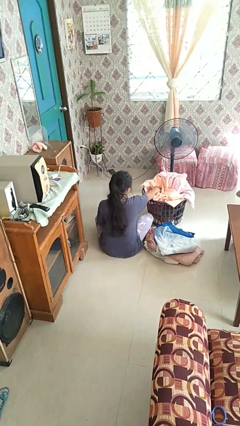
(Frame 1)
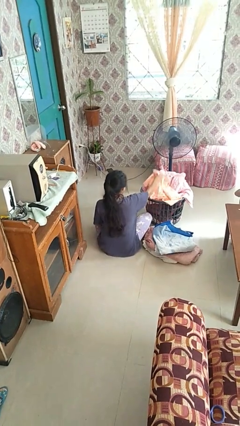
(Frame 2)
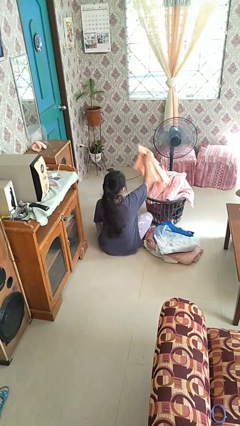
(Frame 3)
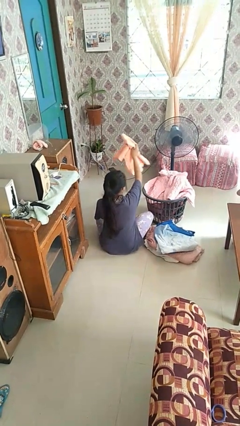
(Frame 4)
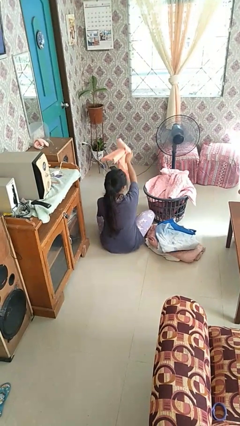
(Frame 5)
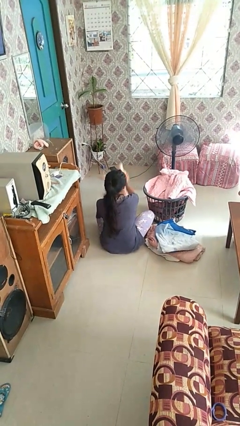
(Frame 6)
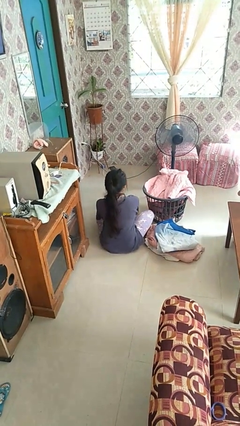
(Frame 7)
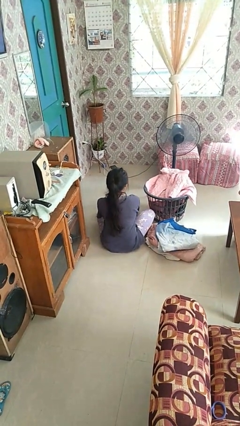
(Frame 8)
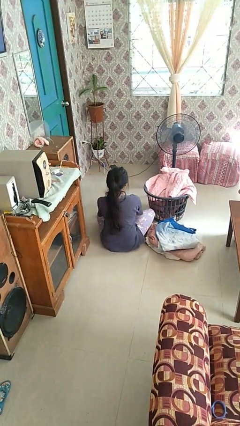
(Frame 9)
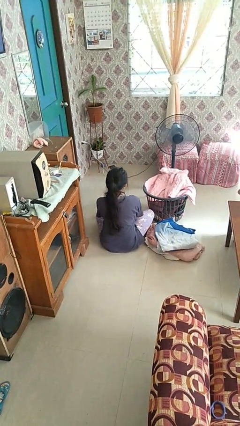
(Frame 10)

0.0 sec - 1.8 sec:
person takes object from basket

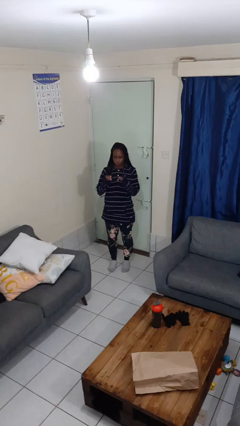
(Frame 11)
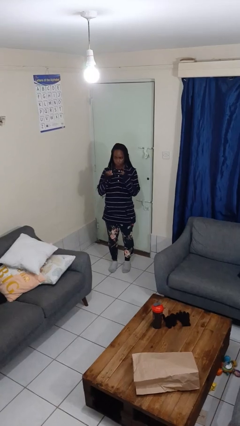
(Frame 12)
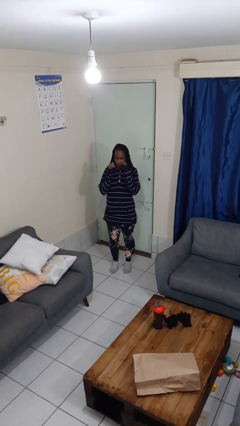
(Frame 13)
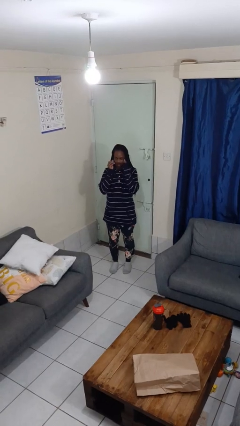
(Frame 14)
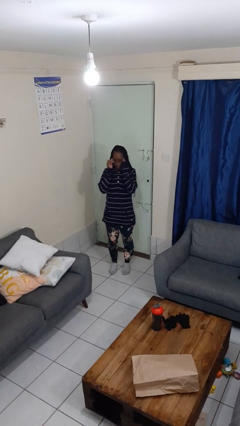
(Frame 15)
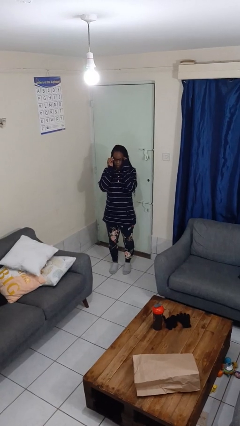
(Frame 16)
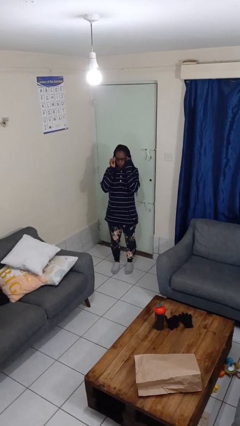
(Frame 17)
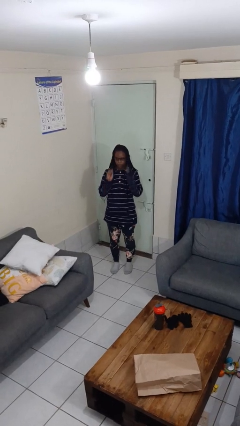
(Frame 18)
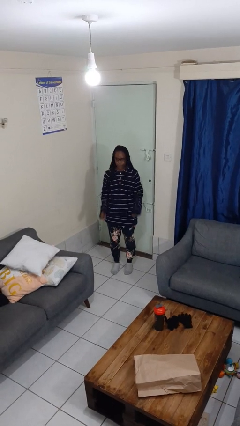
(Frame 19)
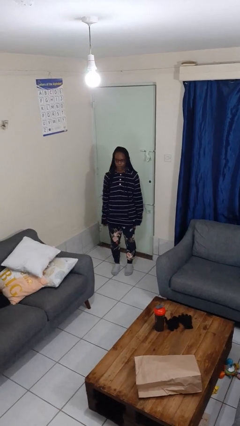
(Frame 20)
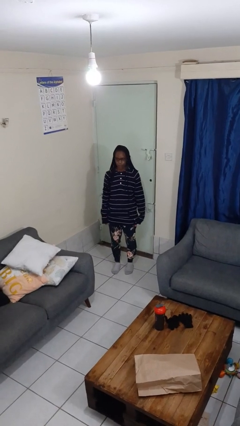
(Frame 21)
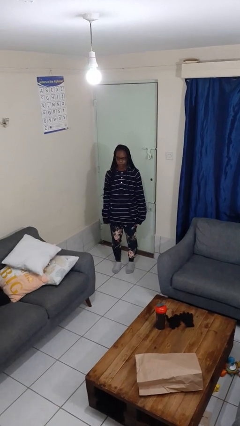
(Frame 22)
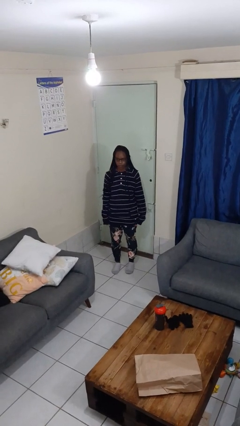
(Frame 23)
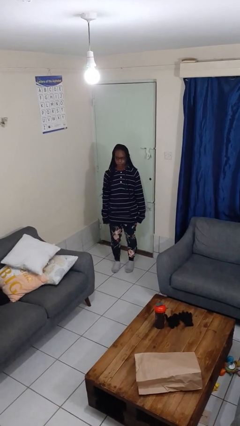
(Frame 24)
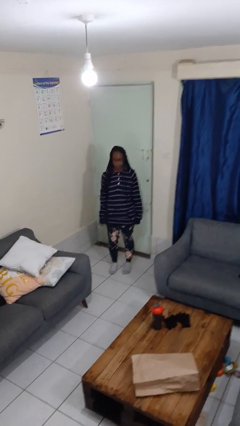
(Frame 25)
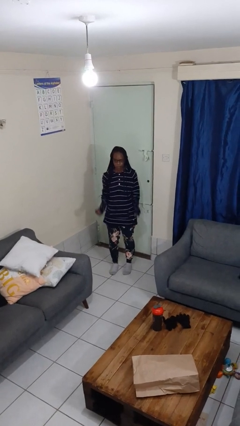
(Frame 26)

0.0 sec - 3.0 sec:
person puts on glasses

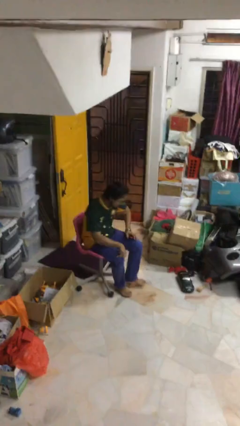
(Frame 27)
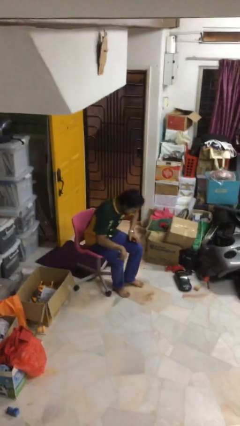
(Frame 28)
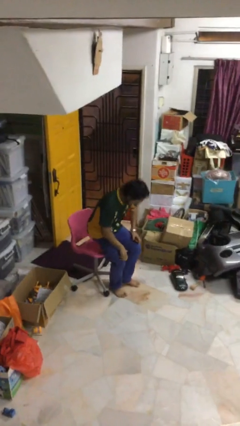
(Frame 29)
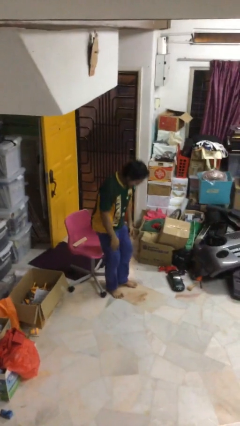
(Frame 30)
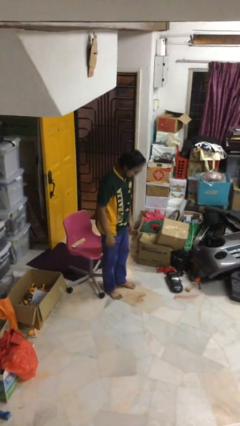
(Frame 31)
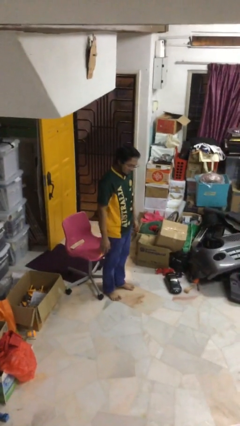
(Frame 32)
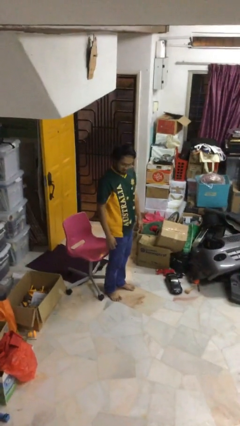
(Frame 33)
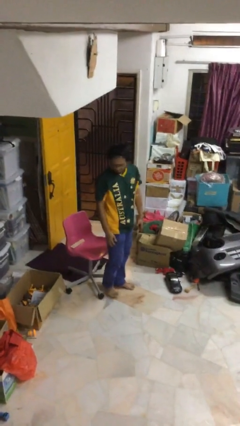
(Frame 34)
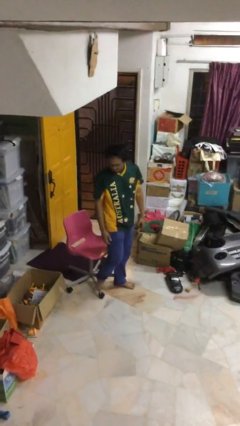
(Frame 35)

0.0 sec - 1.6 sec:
person stands up

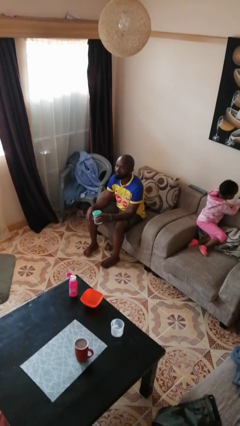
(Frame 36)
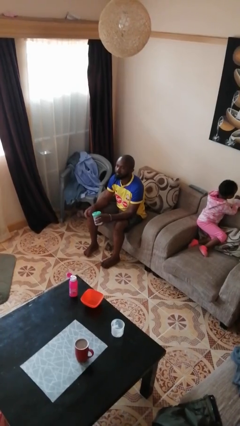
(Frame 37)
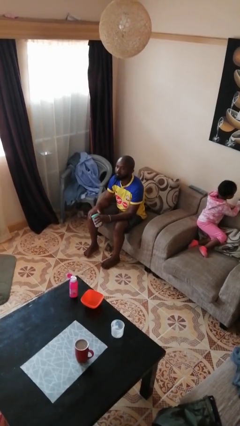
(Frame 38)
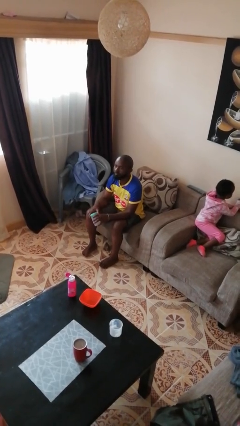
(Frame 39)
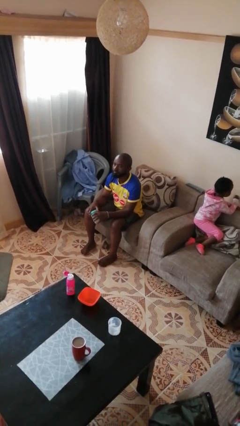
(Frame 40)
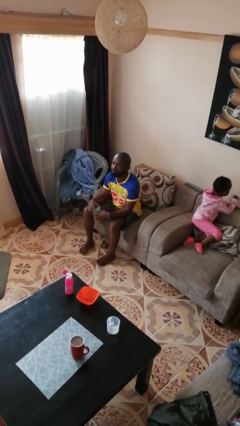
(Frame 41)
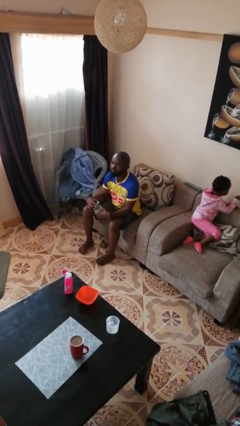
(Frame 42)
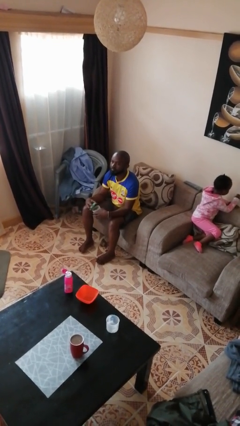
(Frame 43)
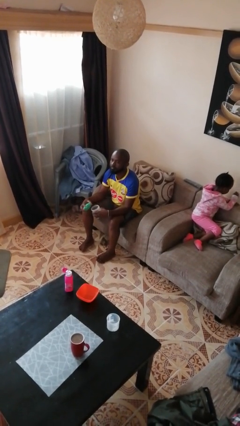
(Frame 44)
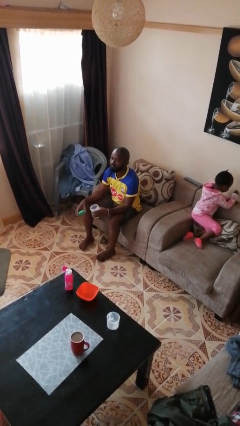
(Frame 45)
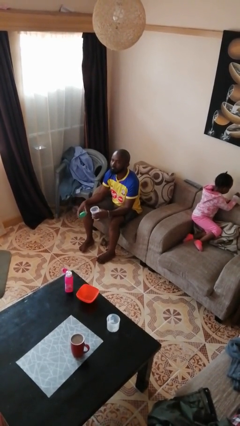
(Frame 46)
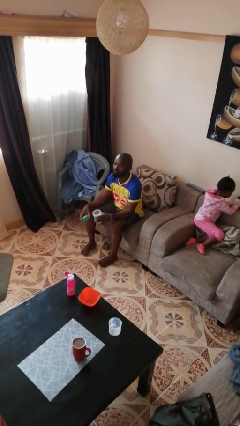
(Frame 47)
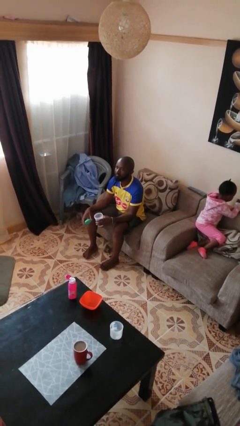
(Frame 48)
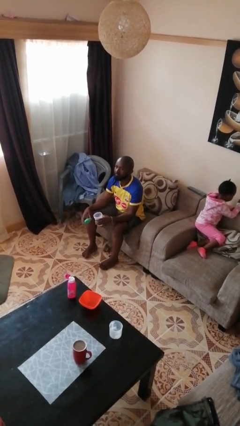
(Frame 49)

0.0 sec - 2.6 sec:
person opens jar

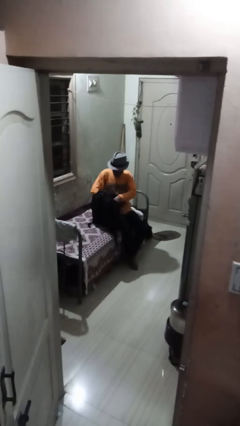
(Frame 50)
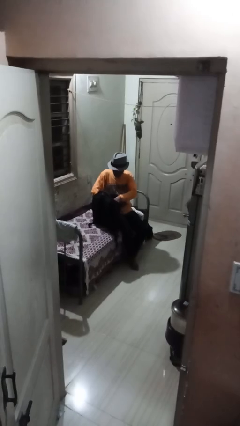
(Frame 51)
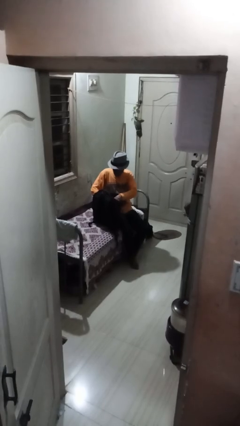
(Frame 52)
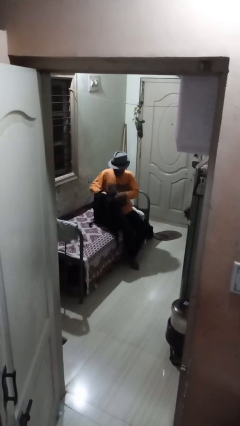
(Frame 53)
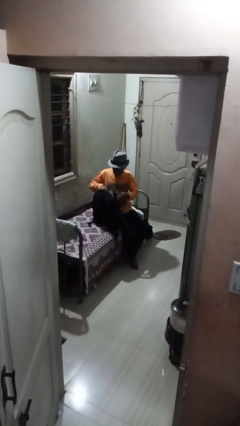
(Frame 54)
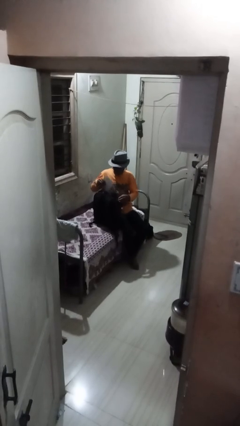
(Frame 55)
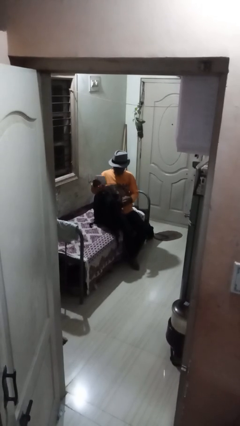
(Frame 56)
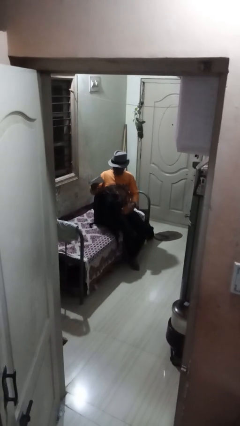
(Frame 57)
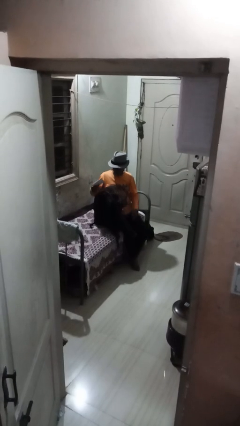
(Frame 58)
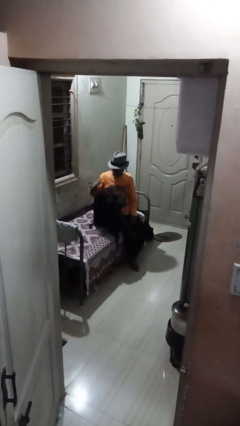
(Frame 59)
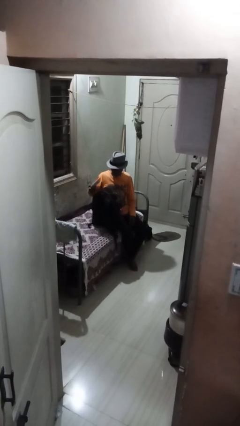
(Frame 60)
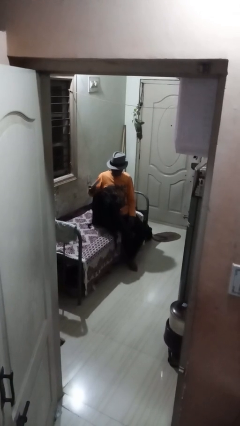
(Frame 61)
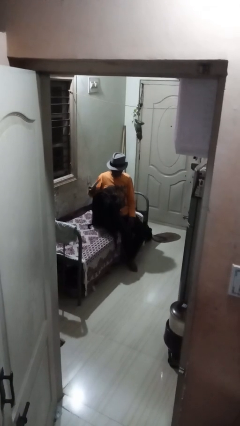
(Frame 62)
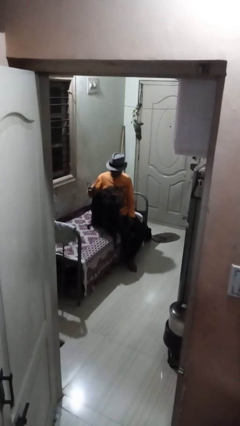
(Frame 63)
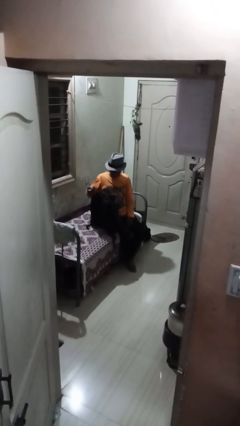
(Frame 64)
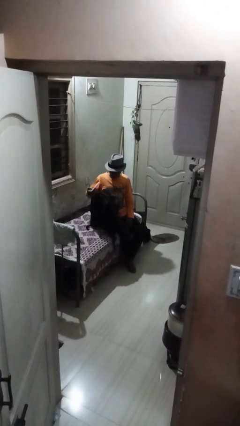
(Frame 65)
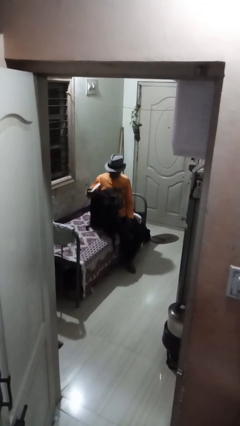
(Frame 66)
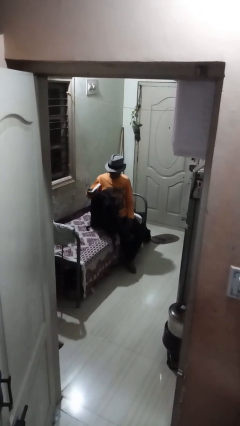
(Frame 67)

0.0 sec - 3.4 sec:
person takes object from backpack

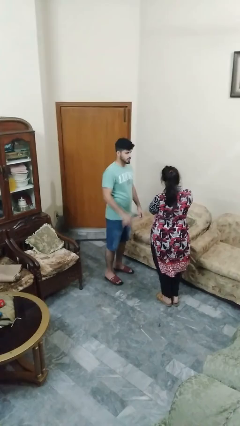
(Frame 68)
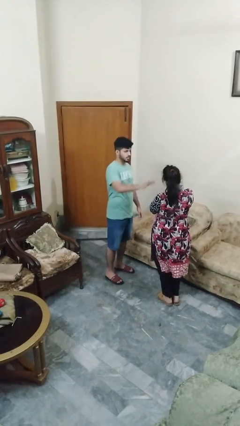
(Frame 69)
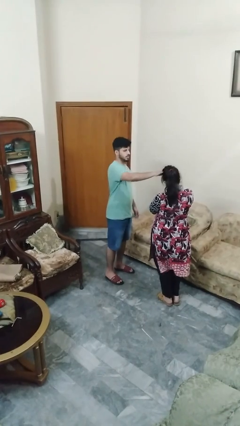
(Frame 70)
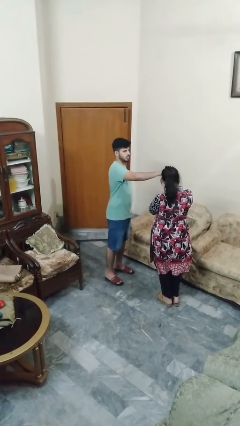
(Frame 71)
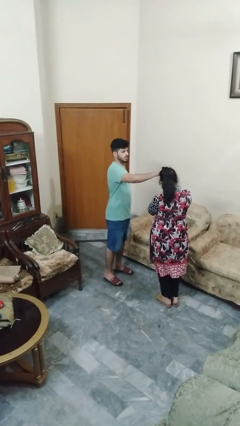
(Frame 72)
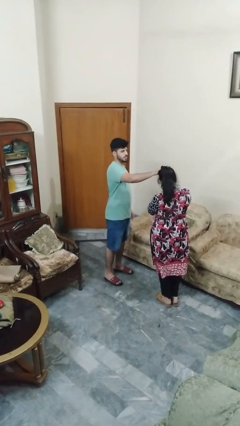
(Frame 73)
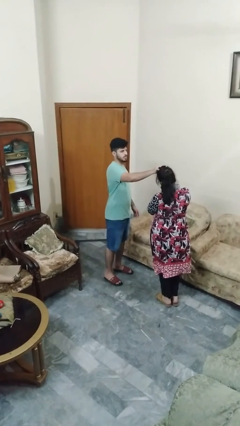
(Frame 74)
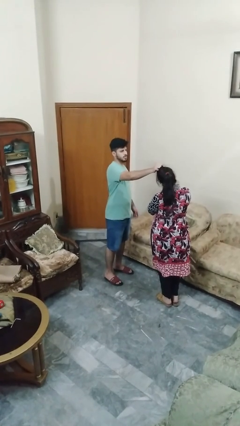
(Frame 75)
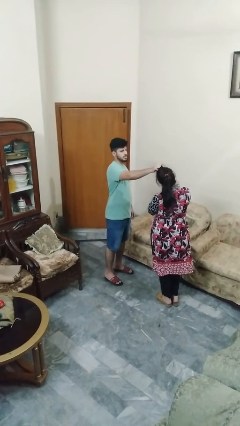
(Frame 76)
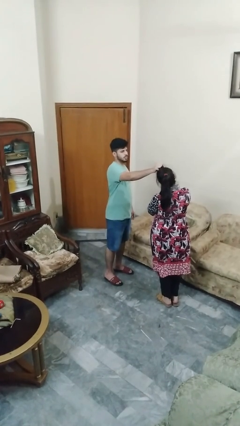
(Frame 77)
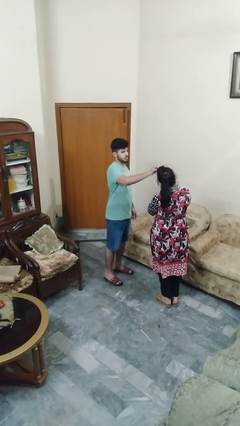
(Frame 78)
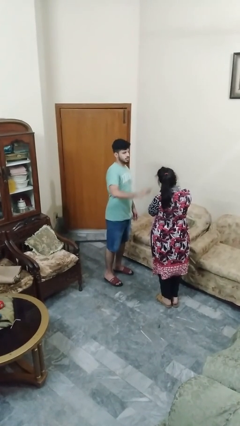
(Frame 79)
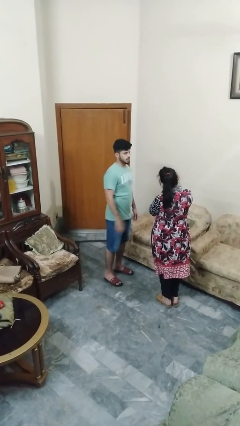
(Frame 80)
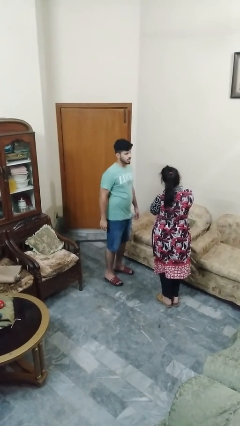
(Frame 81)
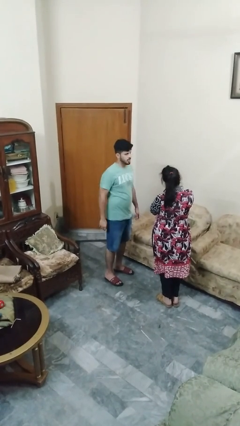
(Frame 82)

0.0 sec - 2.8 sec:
person grabs person by hair

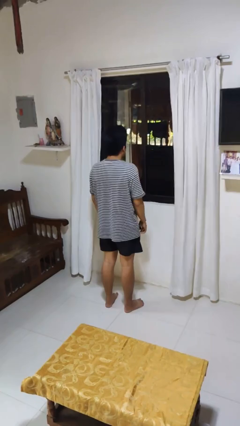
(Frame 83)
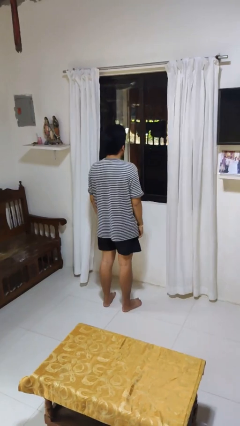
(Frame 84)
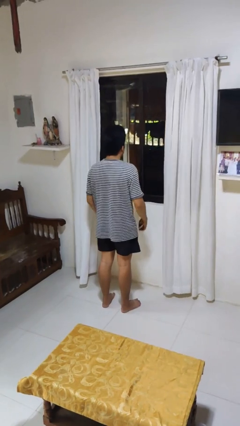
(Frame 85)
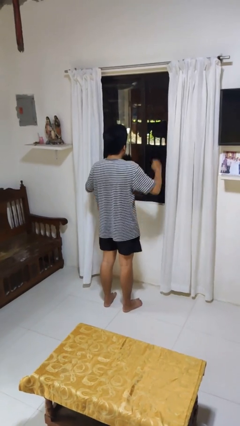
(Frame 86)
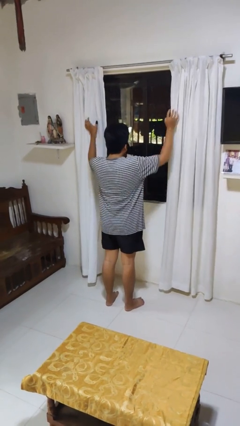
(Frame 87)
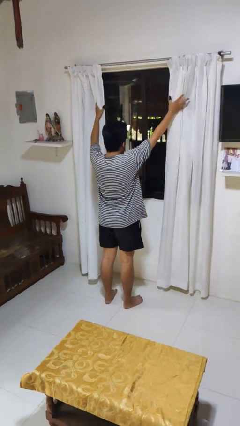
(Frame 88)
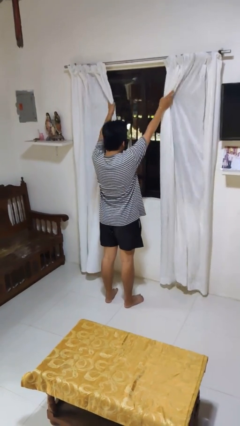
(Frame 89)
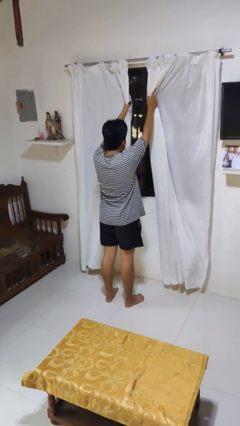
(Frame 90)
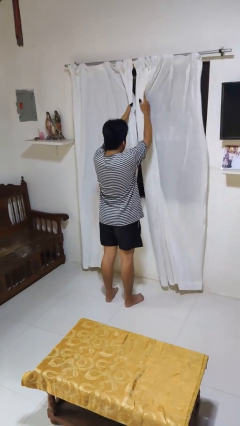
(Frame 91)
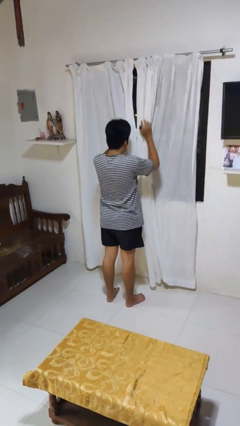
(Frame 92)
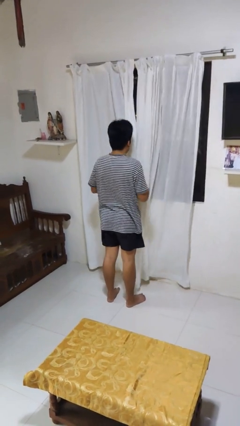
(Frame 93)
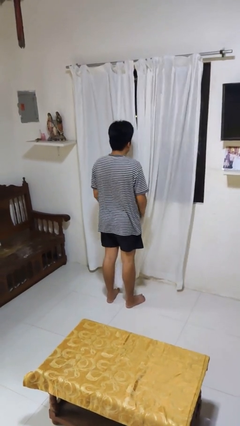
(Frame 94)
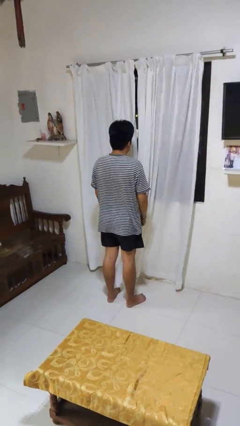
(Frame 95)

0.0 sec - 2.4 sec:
person closes curtains
